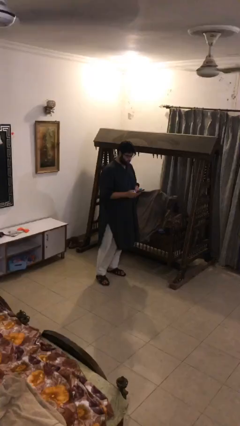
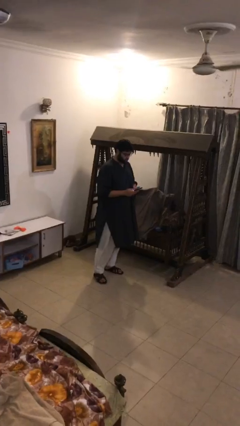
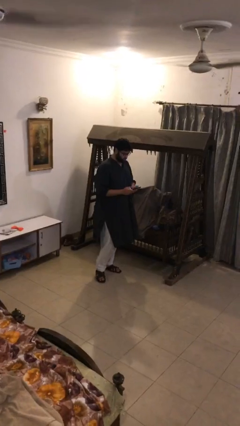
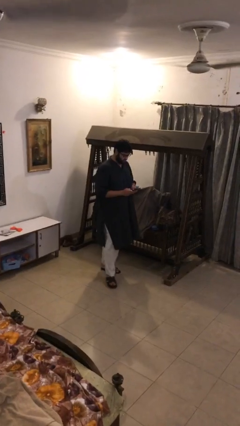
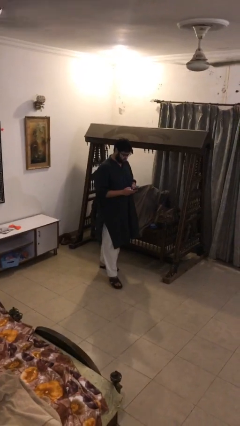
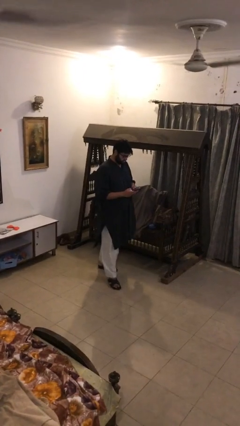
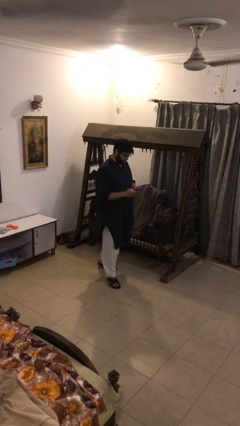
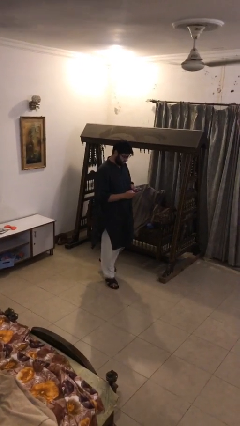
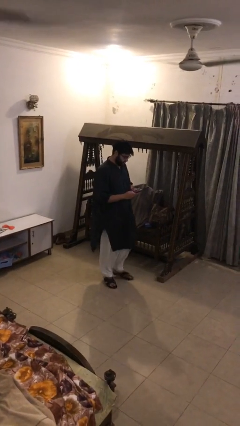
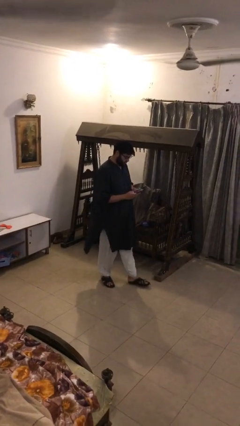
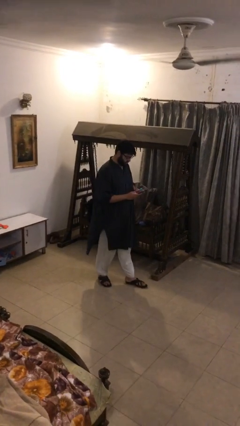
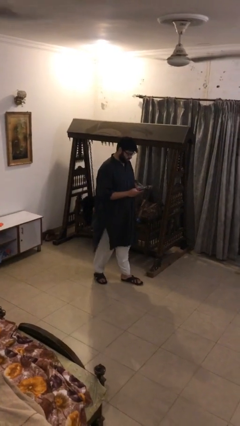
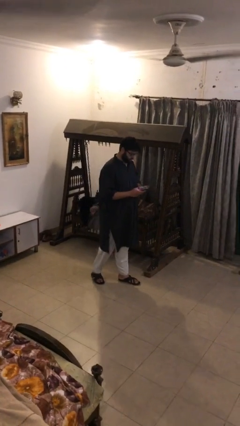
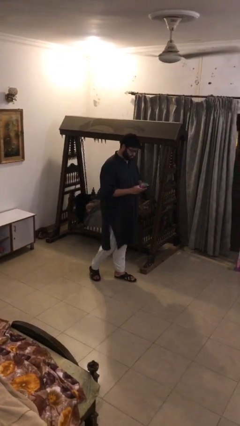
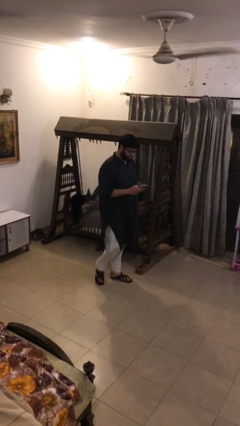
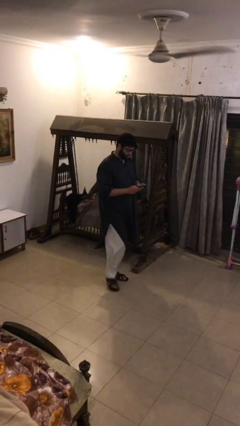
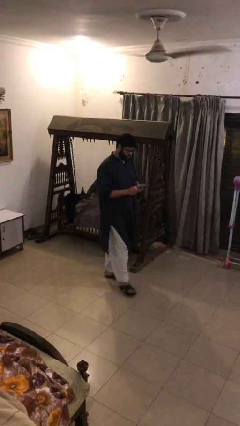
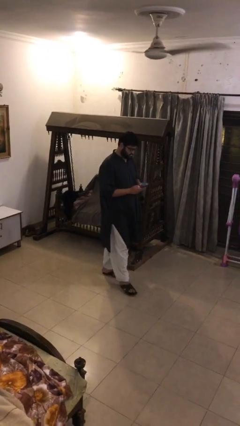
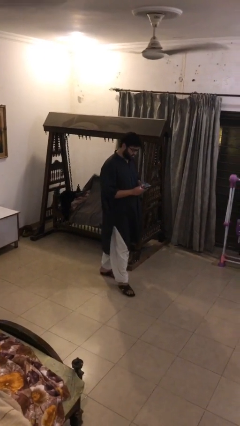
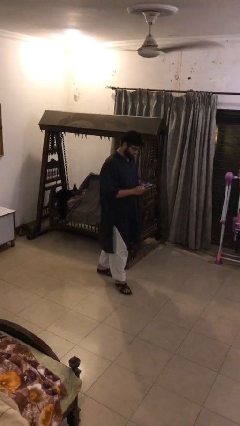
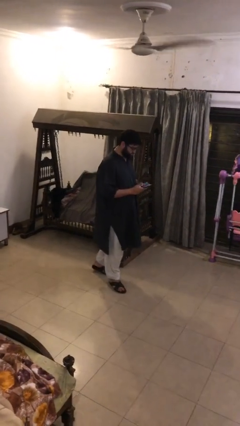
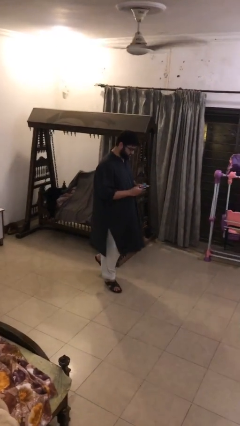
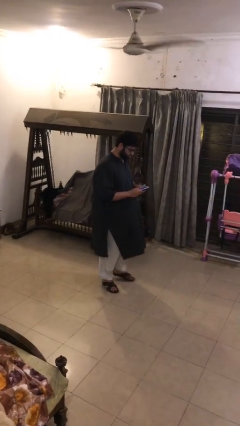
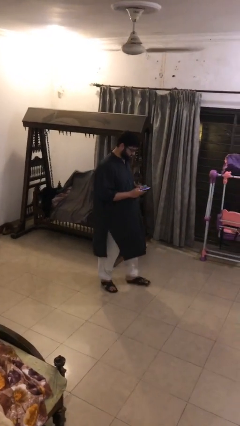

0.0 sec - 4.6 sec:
person texts on phone

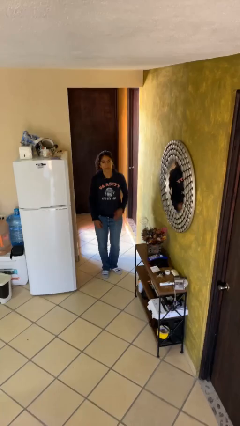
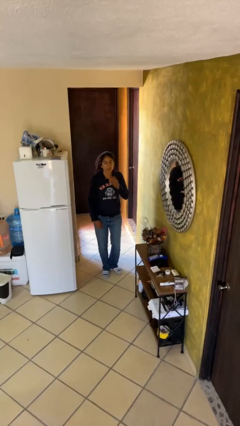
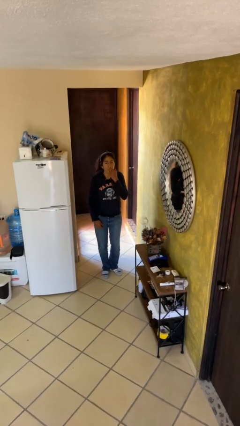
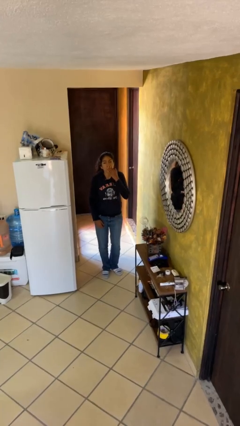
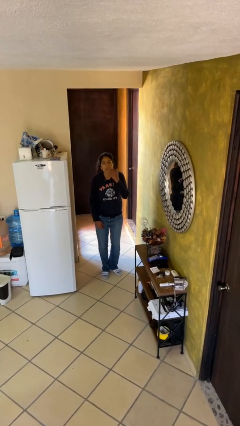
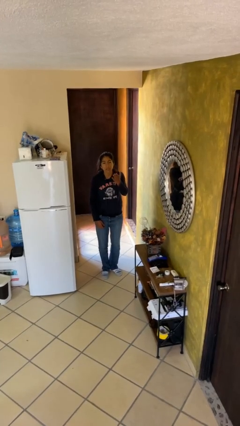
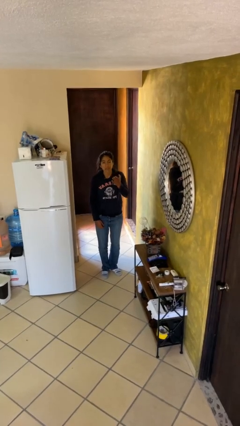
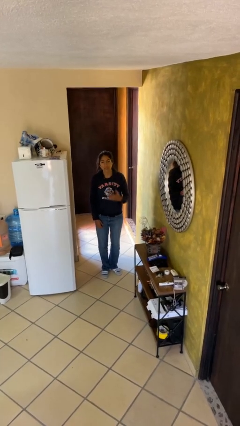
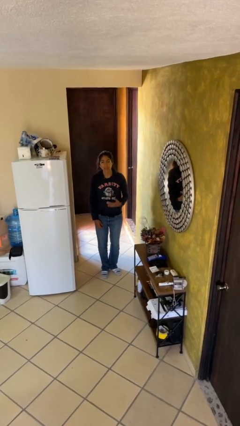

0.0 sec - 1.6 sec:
person gestures blow kiss

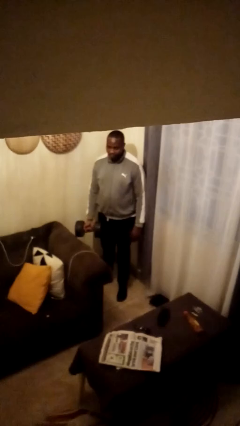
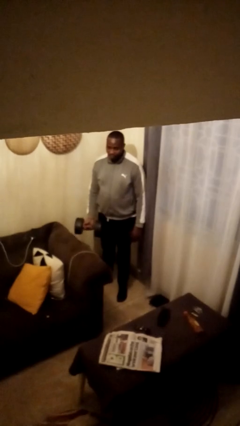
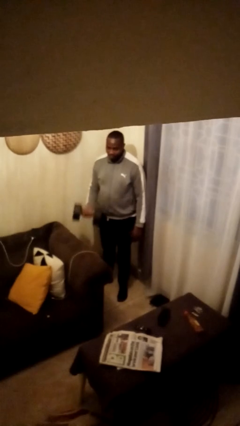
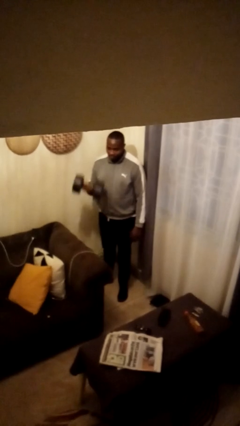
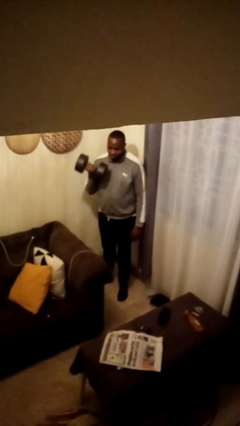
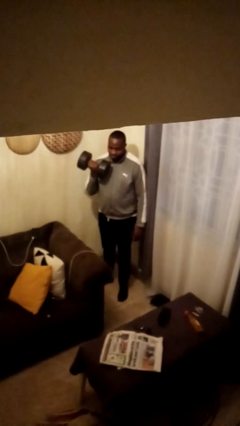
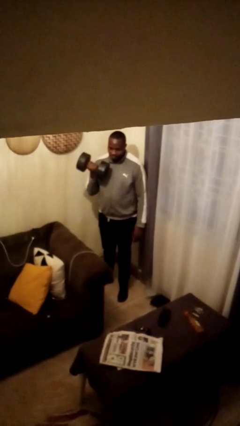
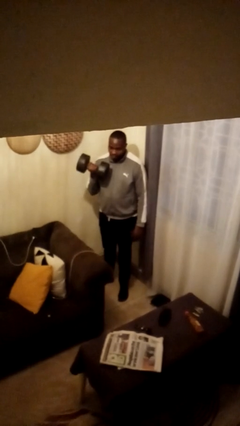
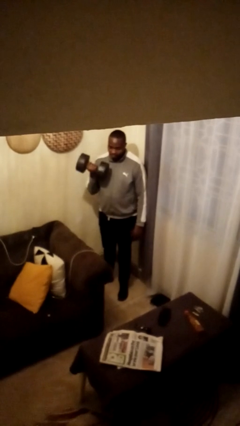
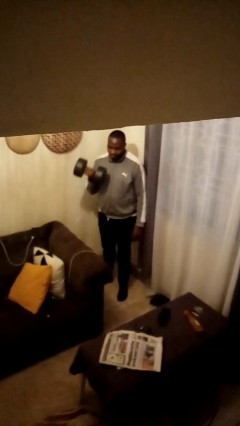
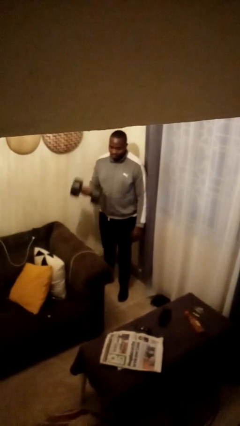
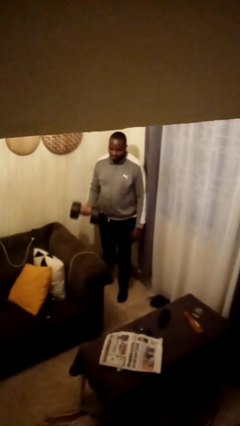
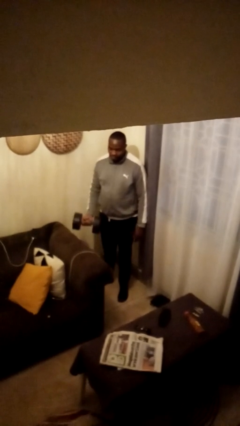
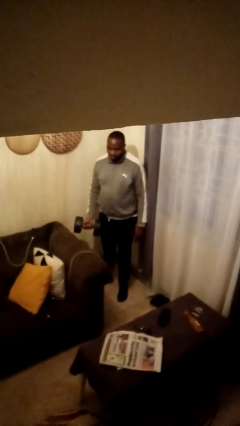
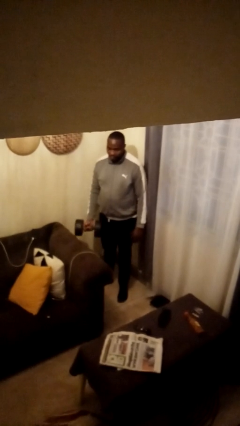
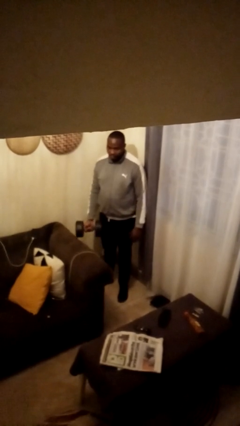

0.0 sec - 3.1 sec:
person lifts dumbbells

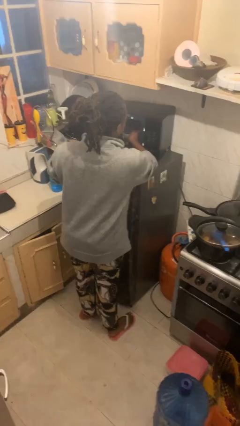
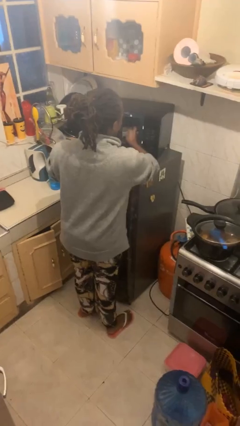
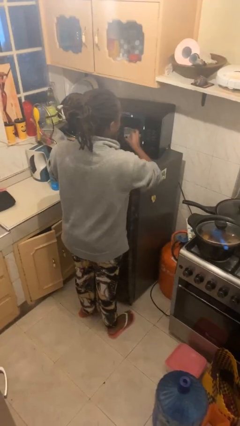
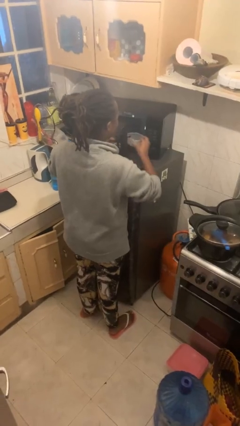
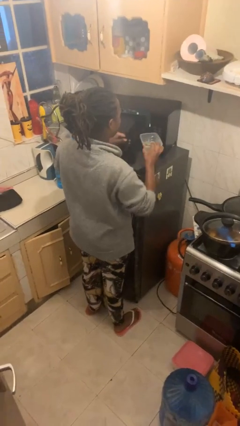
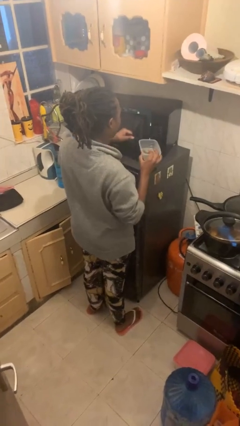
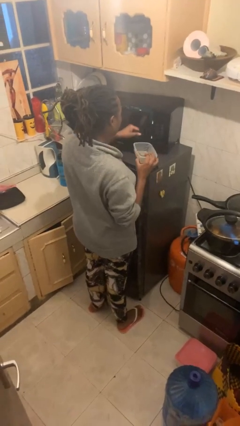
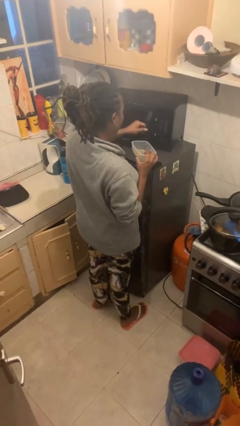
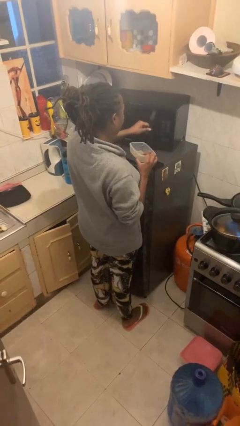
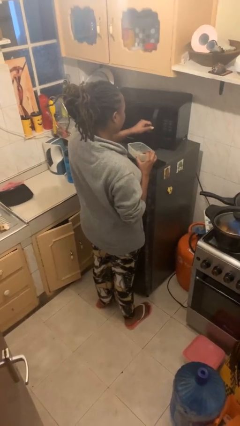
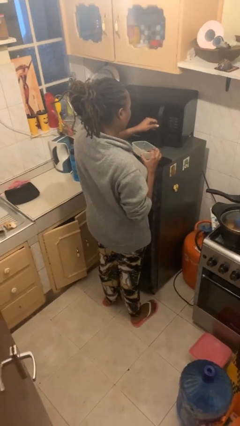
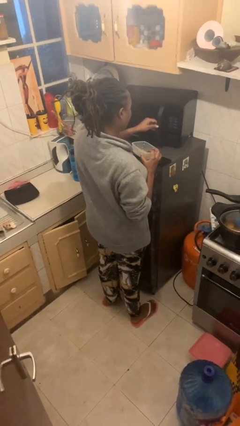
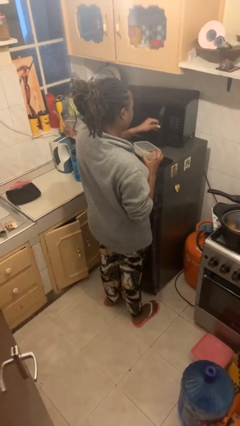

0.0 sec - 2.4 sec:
person takes object from microwave

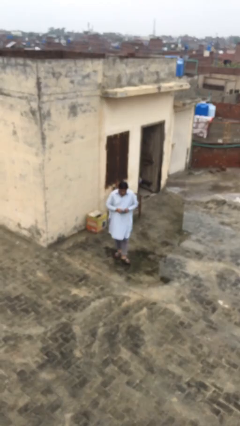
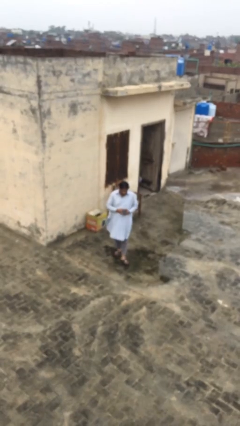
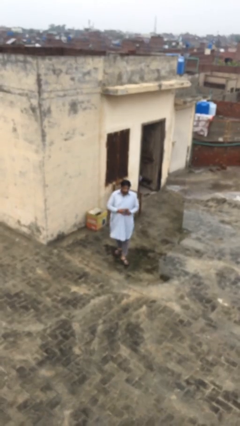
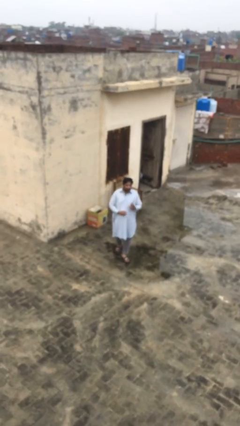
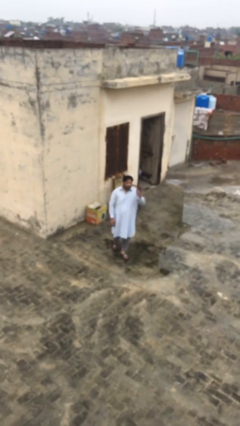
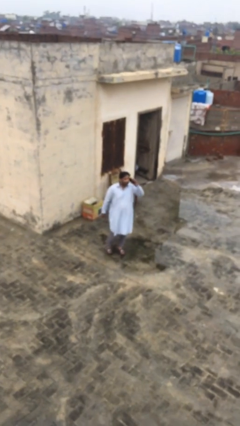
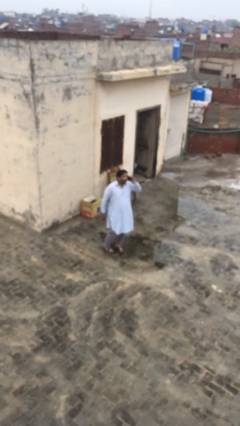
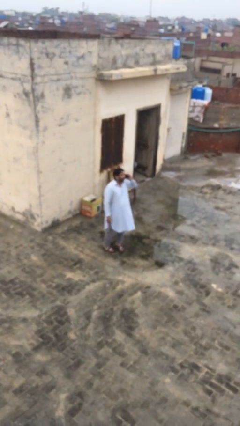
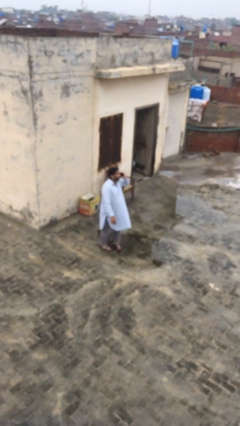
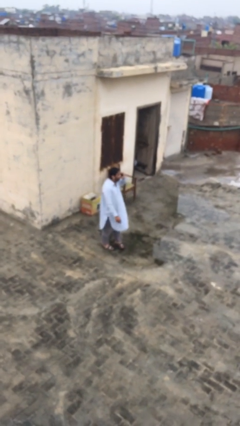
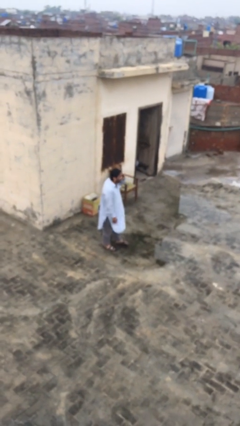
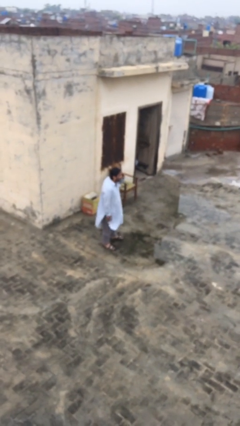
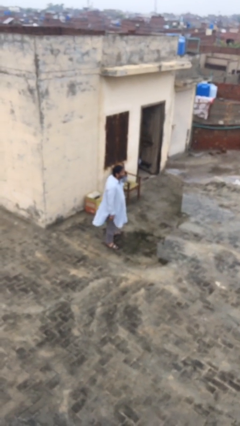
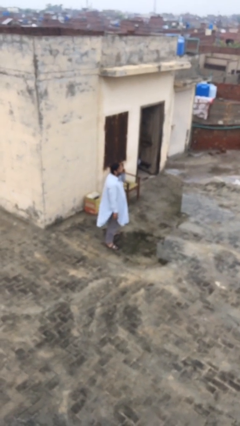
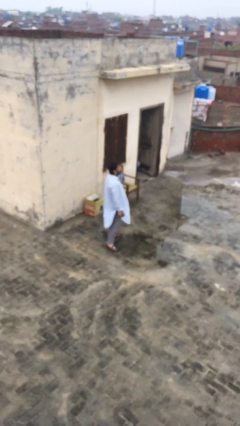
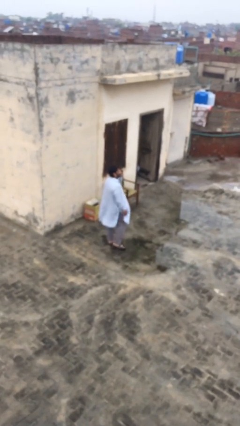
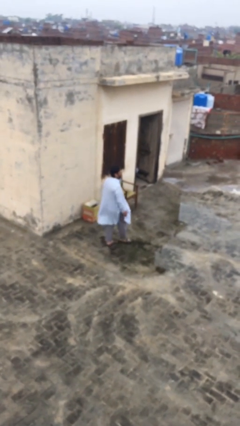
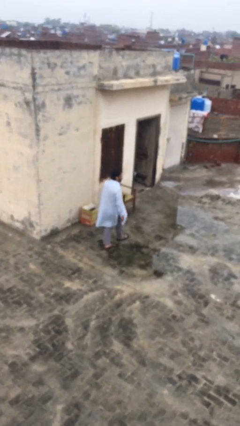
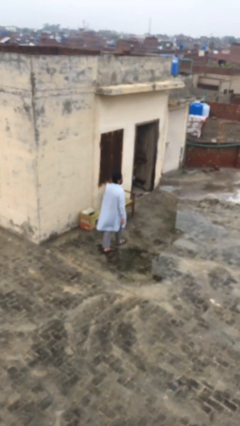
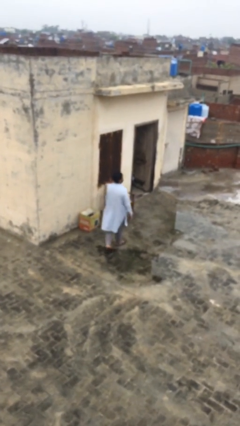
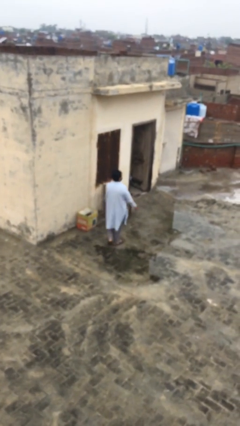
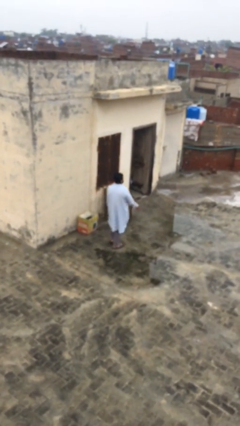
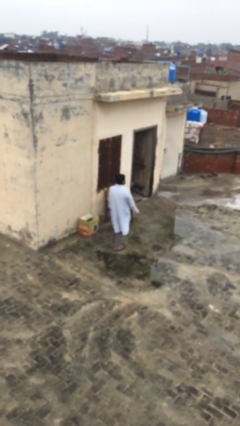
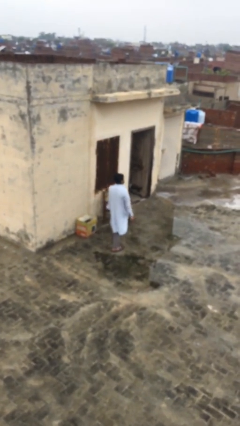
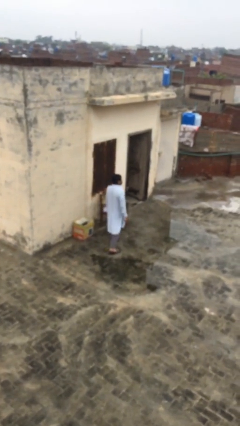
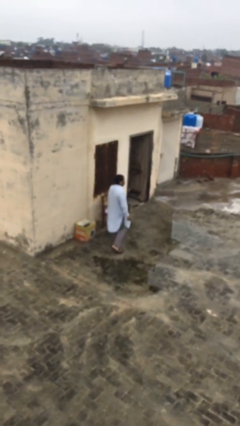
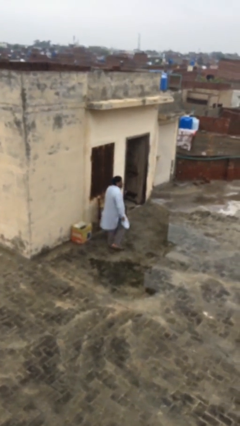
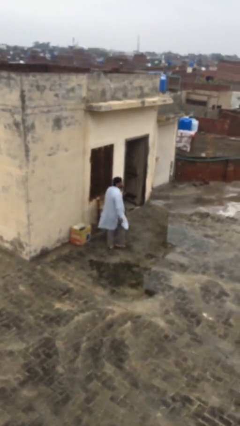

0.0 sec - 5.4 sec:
person talks on phone

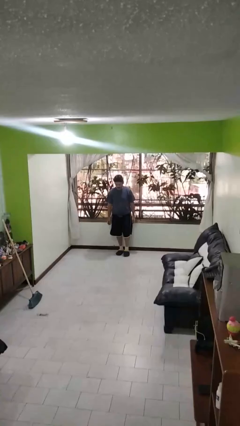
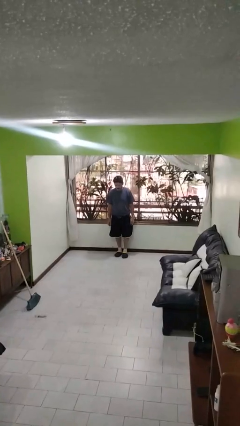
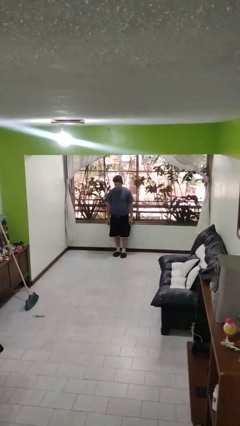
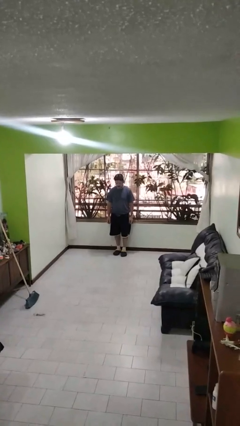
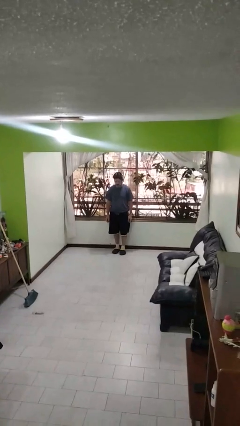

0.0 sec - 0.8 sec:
person stands up from floor
